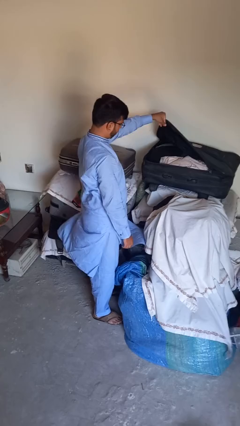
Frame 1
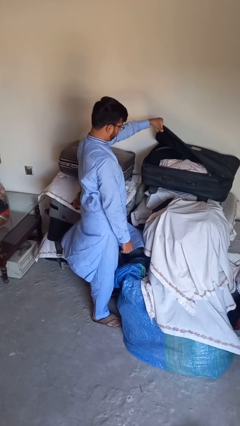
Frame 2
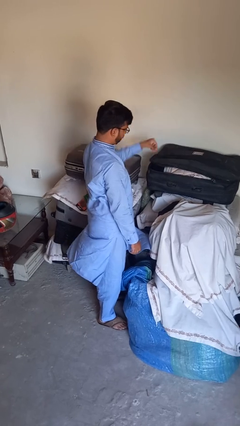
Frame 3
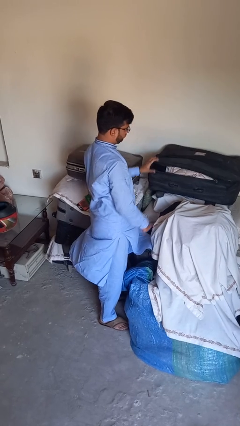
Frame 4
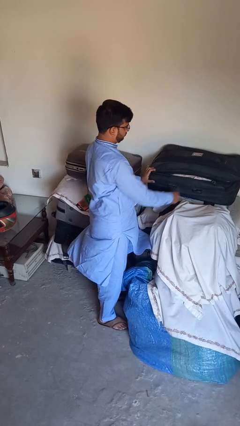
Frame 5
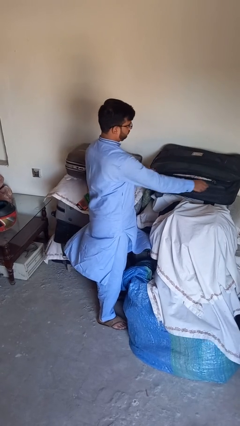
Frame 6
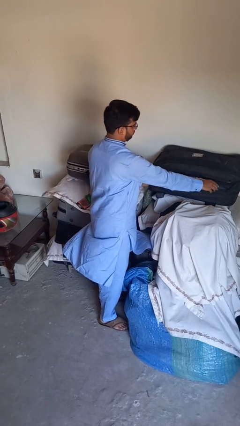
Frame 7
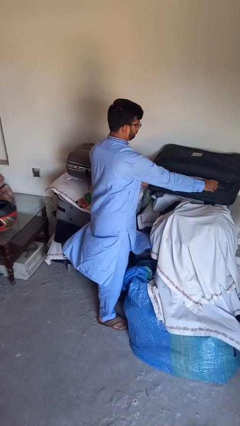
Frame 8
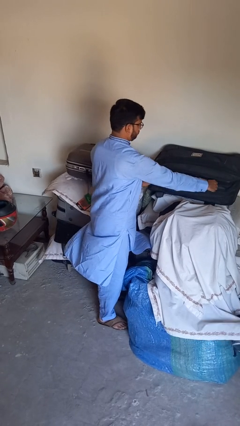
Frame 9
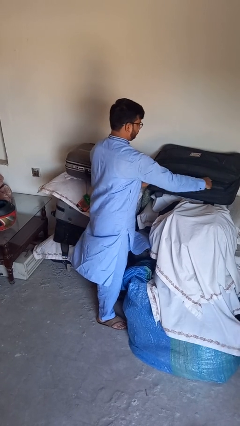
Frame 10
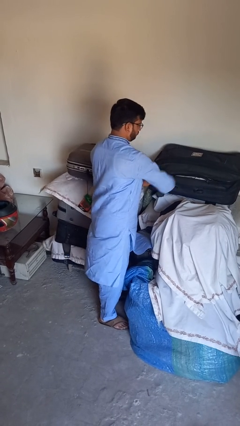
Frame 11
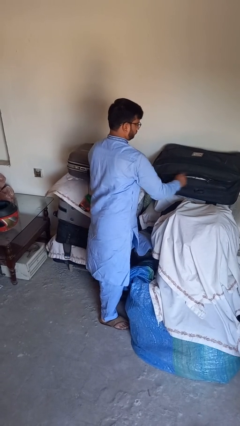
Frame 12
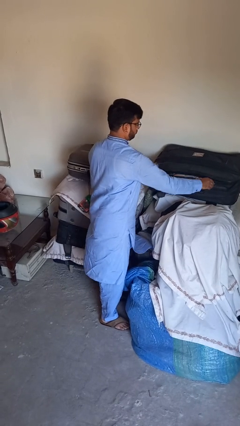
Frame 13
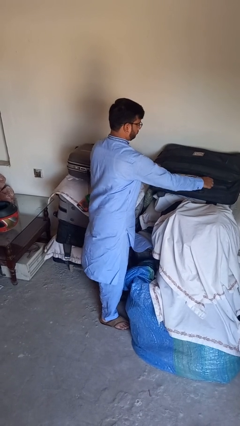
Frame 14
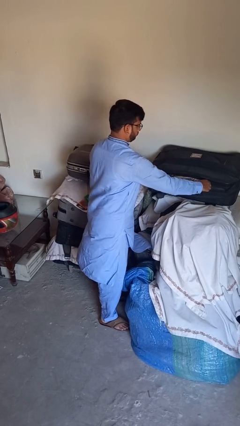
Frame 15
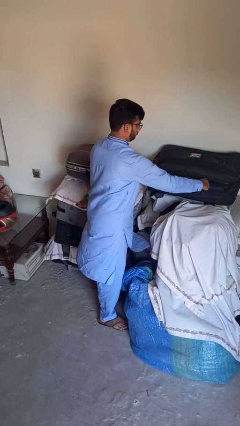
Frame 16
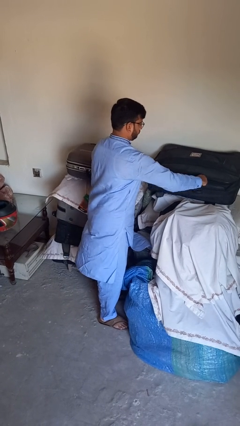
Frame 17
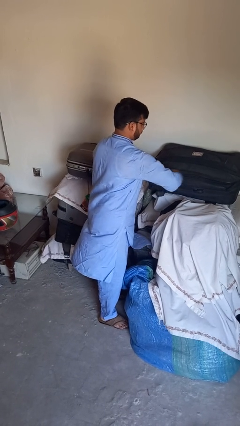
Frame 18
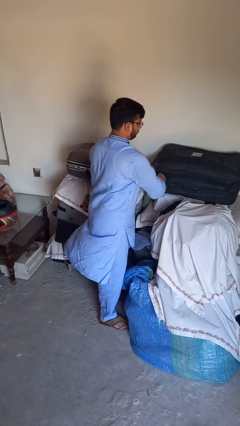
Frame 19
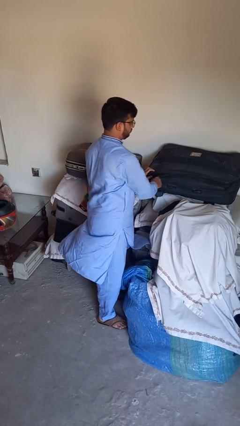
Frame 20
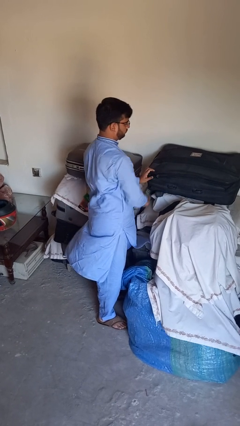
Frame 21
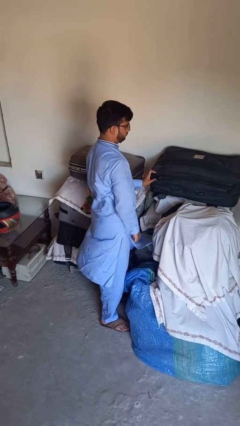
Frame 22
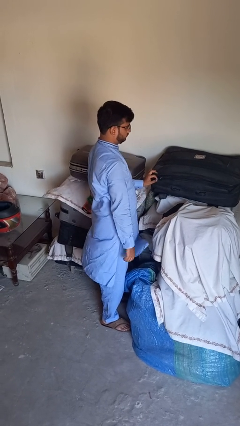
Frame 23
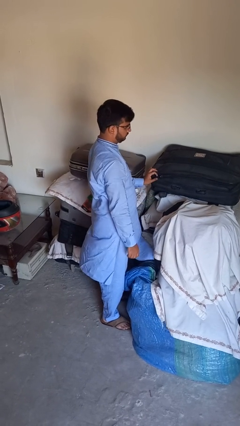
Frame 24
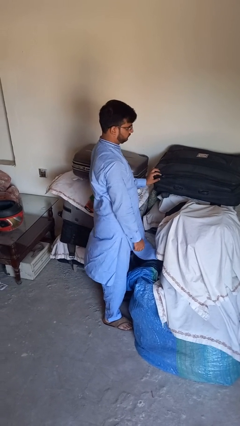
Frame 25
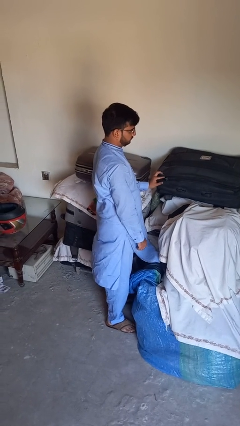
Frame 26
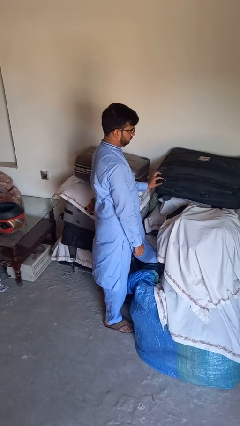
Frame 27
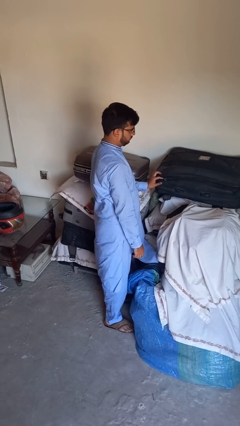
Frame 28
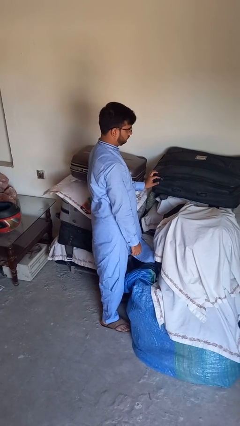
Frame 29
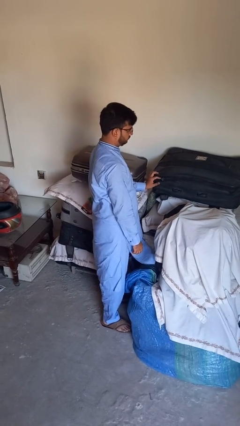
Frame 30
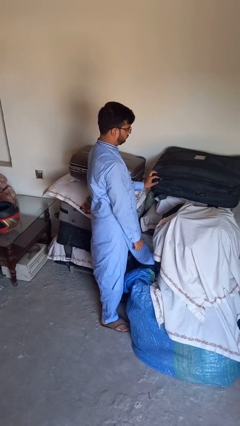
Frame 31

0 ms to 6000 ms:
person closes suitcase

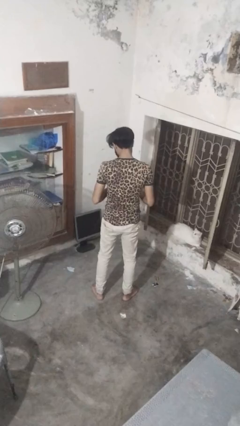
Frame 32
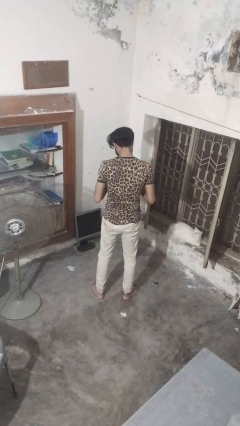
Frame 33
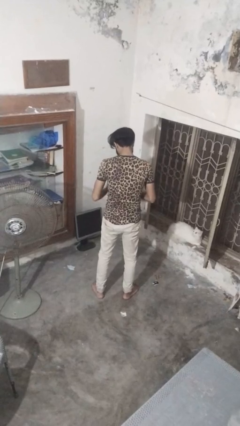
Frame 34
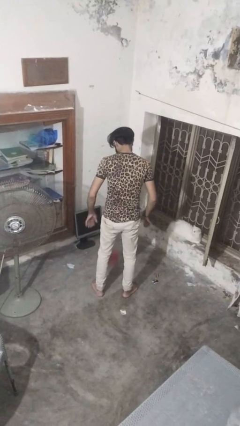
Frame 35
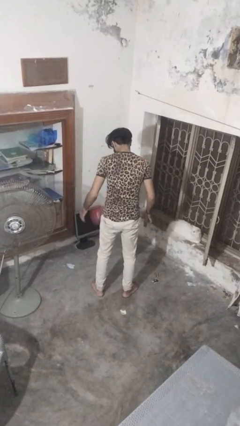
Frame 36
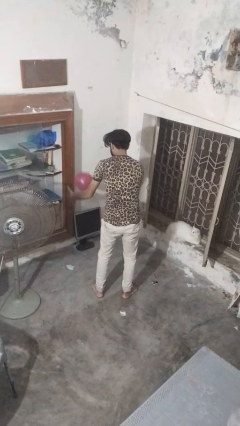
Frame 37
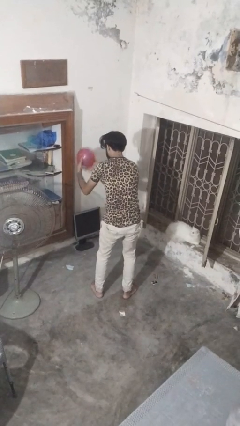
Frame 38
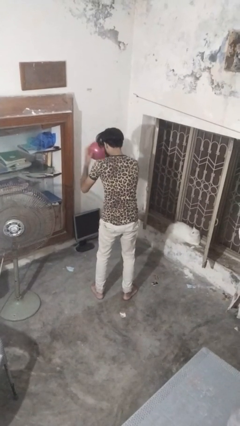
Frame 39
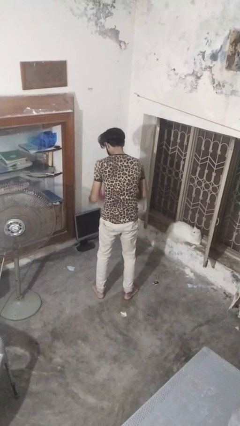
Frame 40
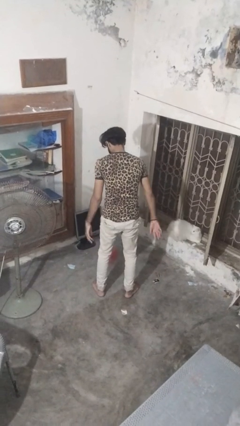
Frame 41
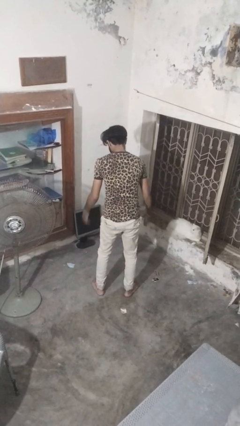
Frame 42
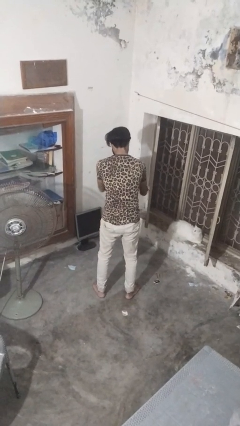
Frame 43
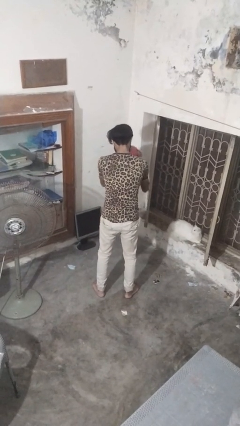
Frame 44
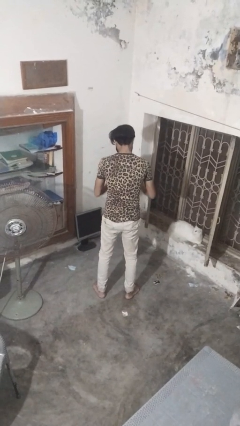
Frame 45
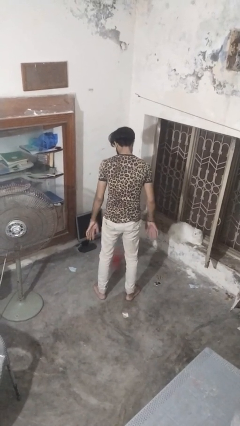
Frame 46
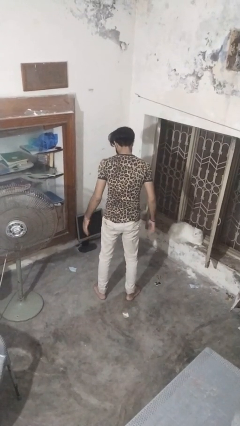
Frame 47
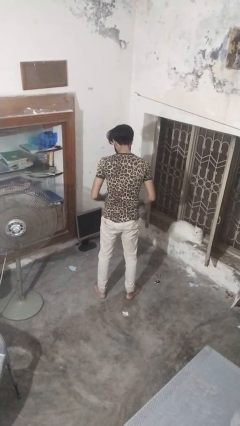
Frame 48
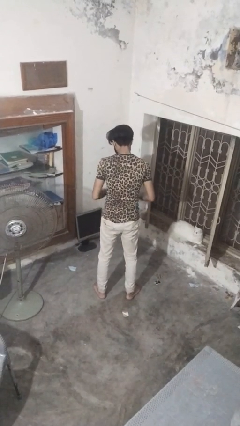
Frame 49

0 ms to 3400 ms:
person bounces ball on floor

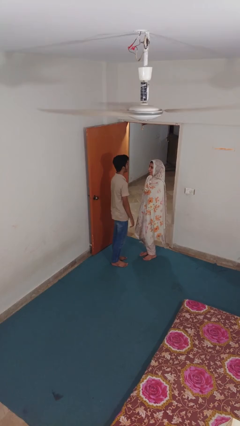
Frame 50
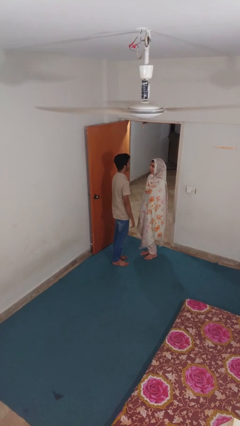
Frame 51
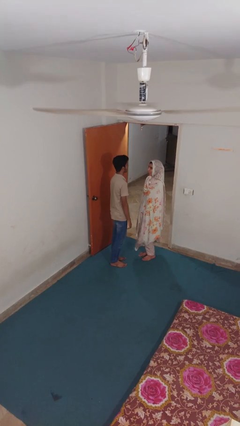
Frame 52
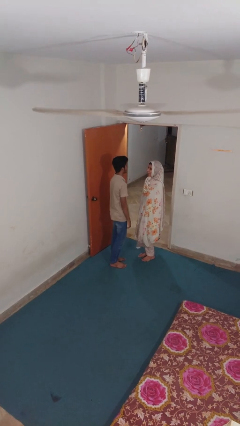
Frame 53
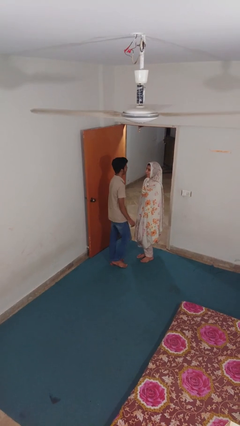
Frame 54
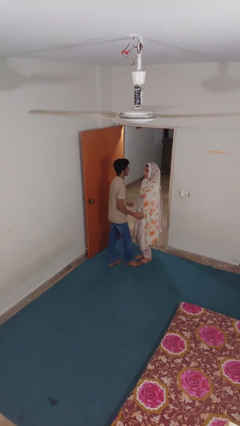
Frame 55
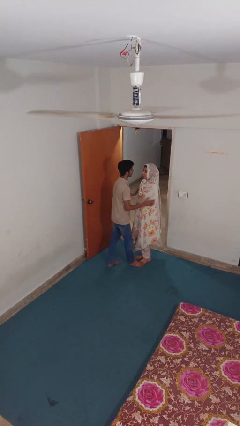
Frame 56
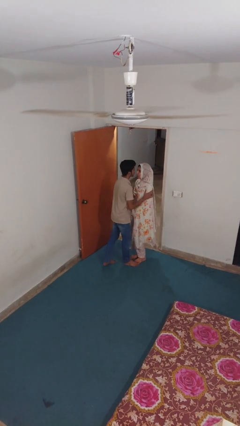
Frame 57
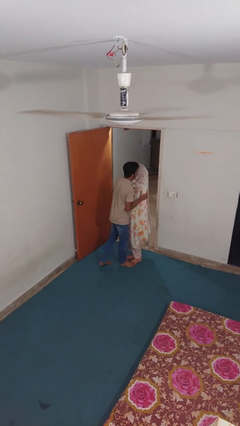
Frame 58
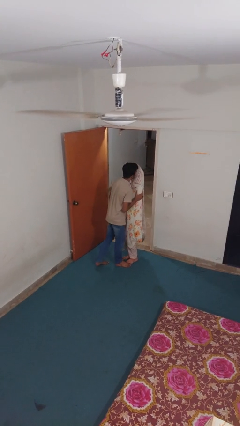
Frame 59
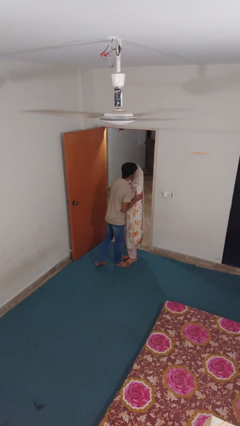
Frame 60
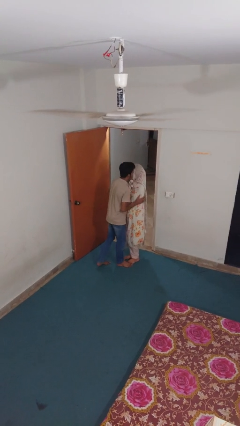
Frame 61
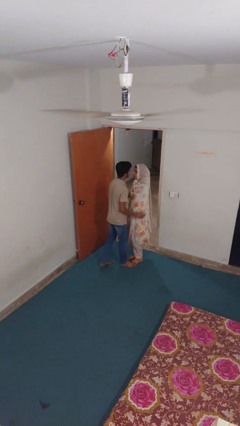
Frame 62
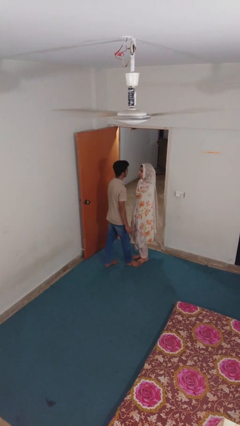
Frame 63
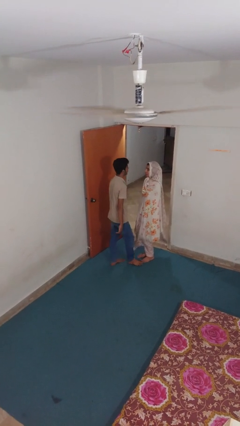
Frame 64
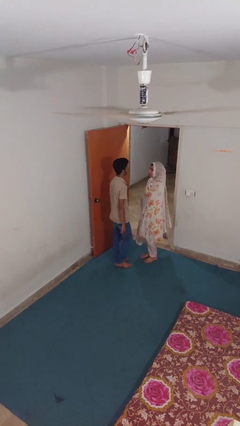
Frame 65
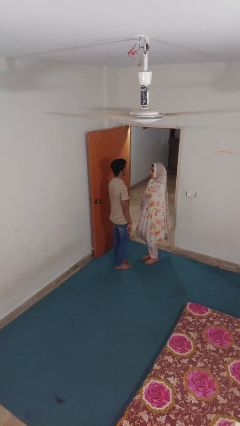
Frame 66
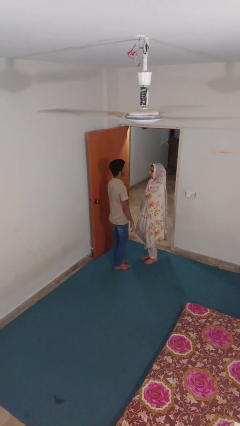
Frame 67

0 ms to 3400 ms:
person kisses cheek of person

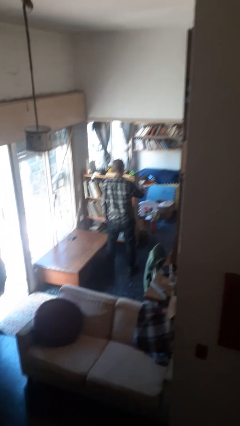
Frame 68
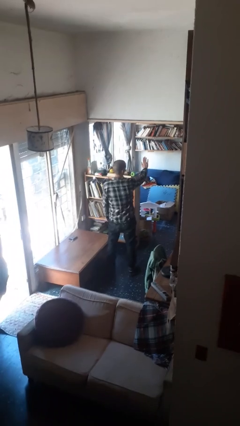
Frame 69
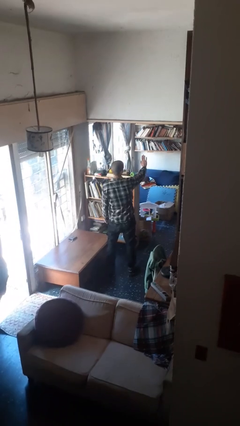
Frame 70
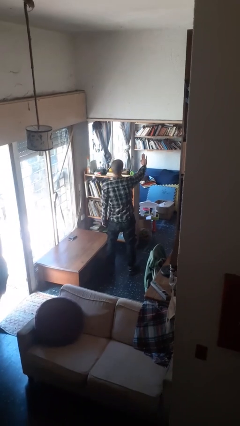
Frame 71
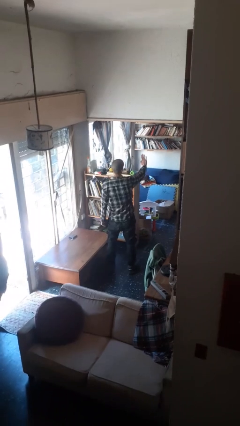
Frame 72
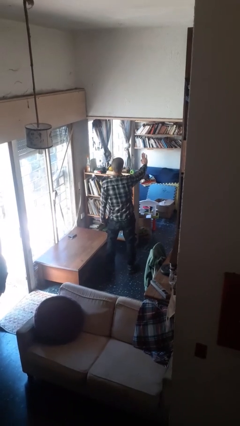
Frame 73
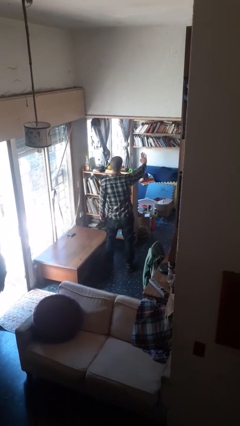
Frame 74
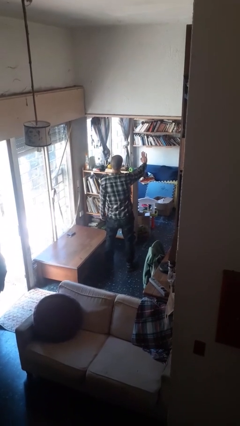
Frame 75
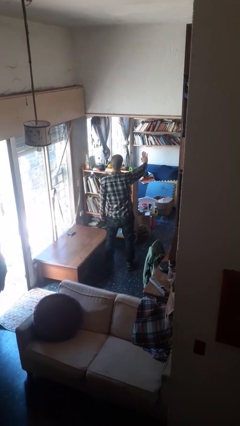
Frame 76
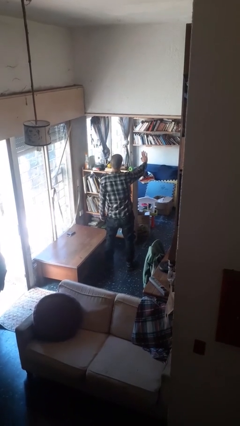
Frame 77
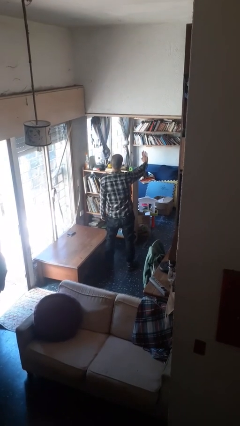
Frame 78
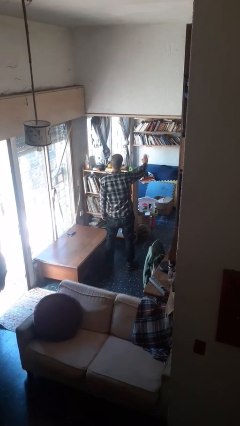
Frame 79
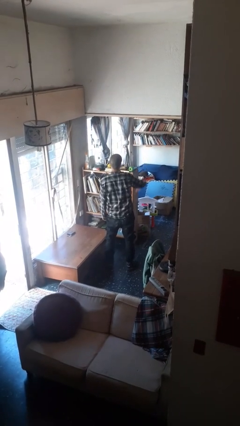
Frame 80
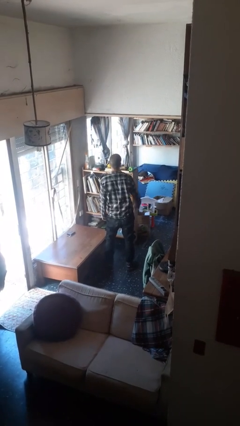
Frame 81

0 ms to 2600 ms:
person gestures stop

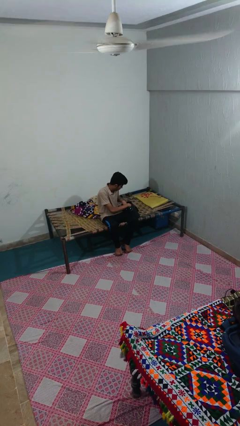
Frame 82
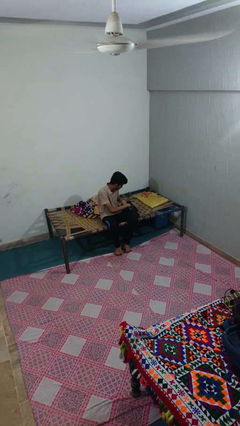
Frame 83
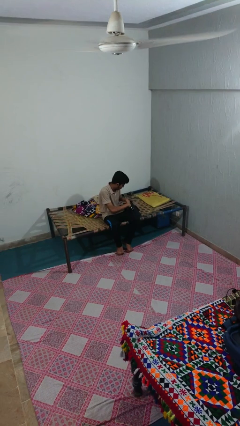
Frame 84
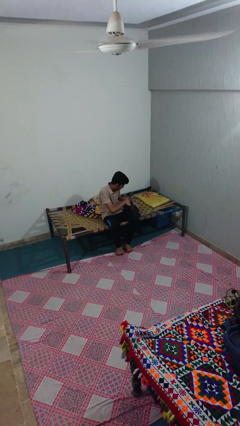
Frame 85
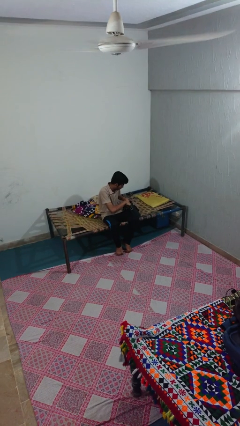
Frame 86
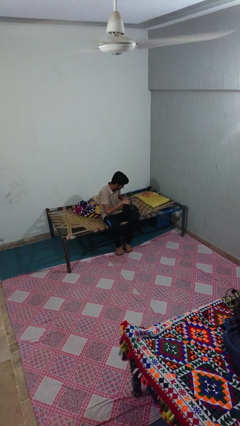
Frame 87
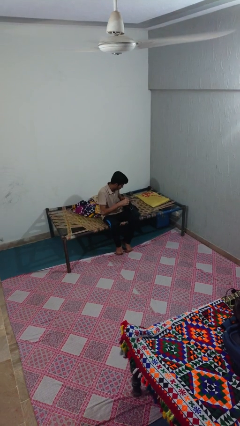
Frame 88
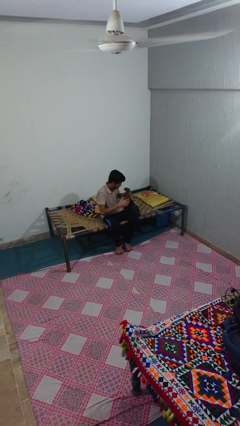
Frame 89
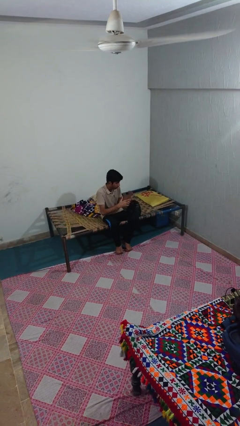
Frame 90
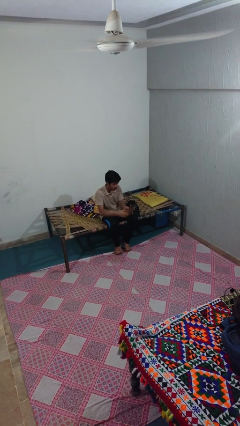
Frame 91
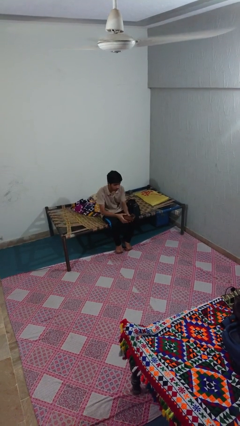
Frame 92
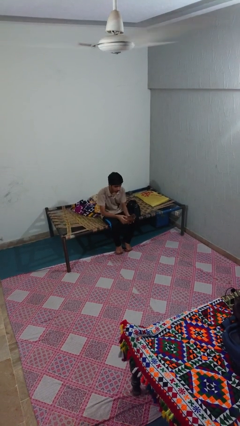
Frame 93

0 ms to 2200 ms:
person takes object from purse

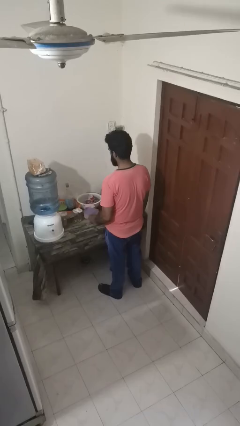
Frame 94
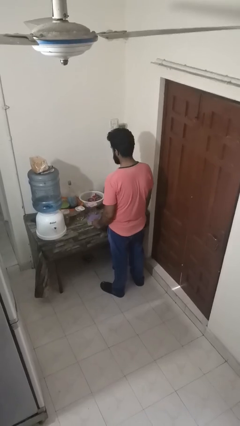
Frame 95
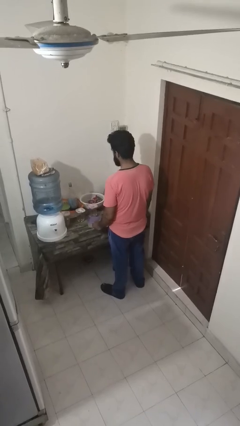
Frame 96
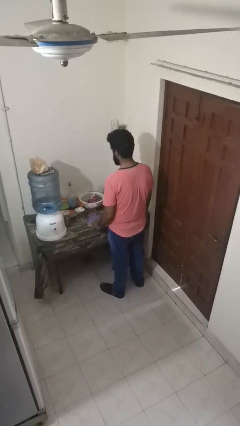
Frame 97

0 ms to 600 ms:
person puts down object on countertop
